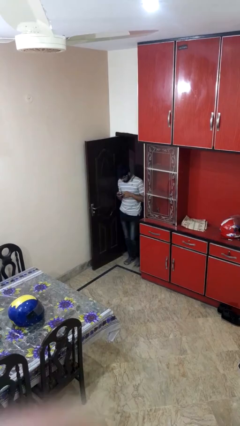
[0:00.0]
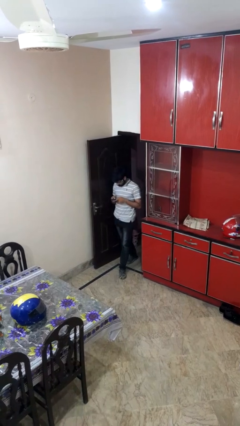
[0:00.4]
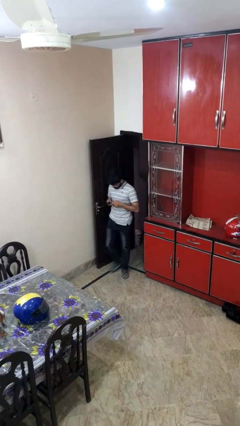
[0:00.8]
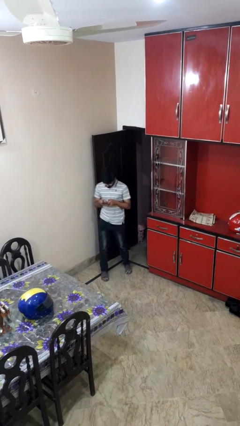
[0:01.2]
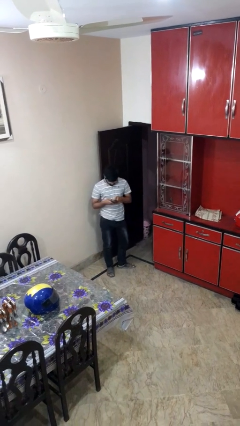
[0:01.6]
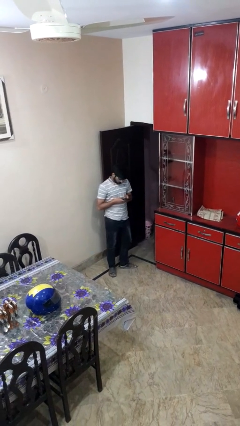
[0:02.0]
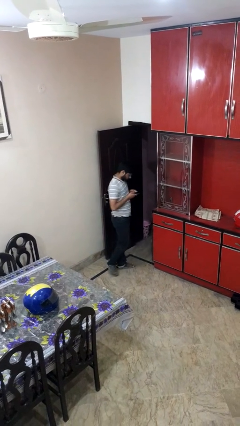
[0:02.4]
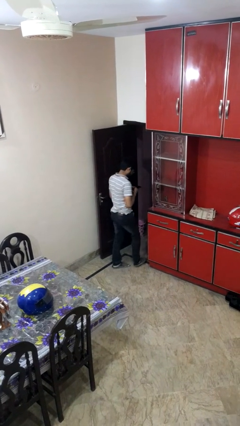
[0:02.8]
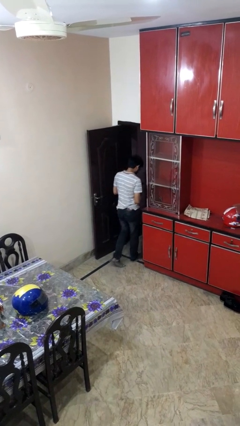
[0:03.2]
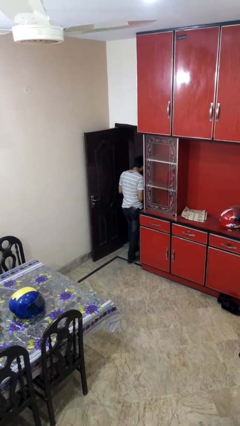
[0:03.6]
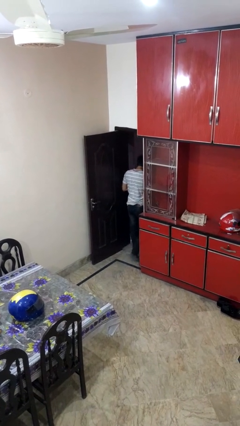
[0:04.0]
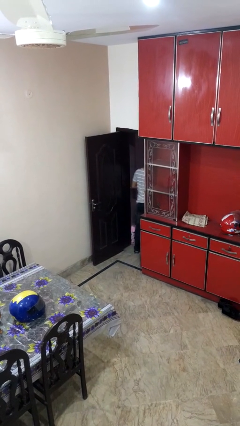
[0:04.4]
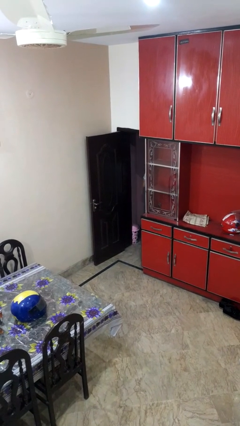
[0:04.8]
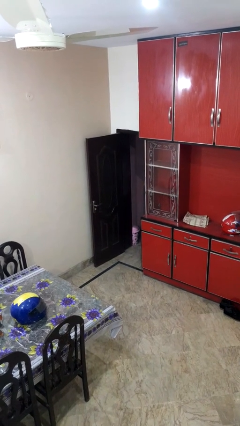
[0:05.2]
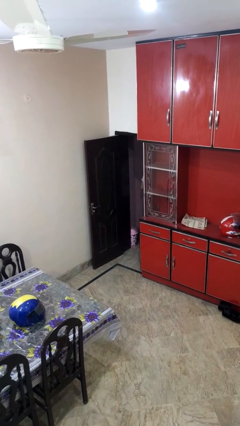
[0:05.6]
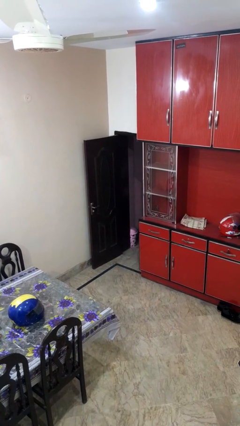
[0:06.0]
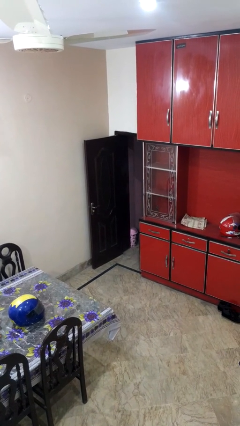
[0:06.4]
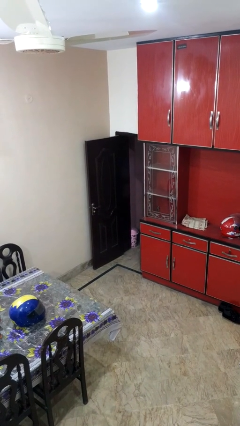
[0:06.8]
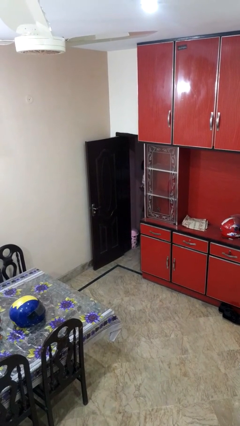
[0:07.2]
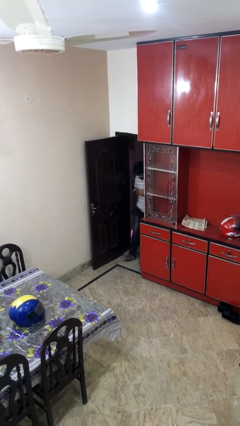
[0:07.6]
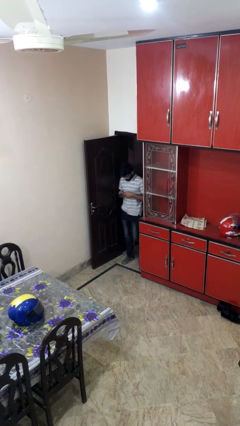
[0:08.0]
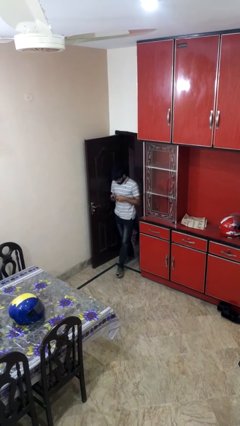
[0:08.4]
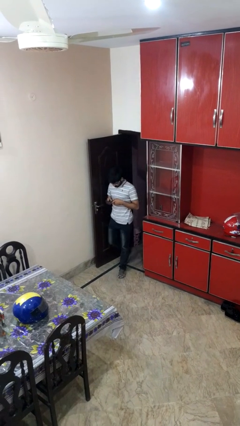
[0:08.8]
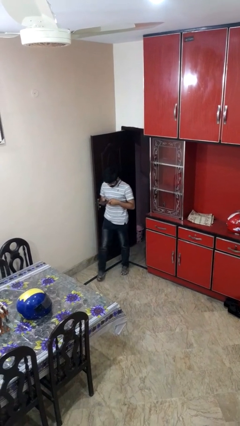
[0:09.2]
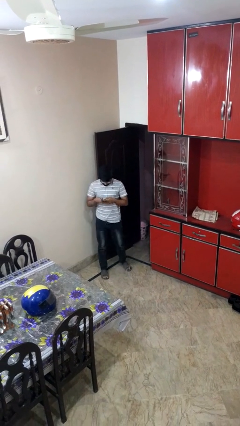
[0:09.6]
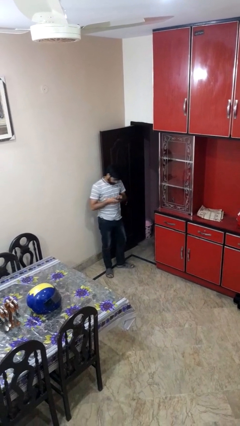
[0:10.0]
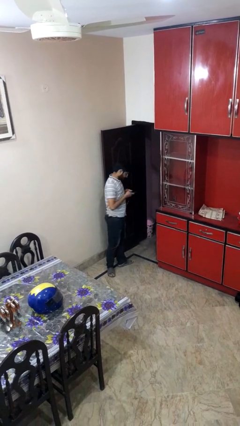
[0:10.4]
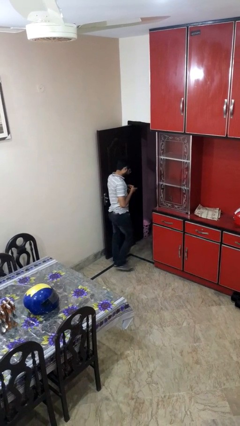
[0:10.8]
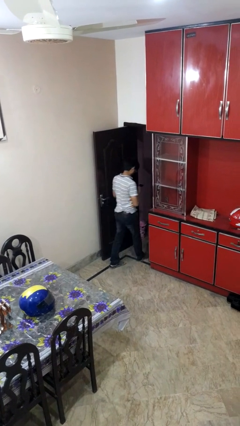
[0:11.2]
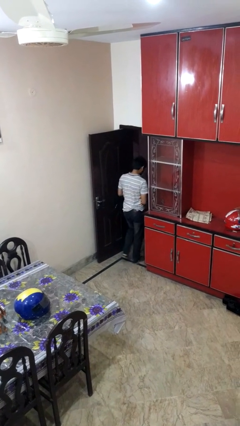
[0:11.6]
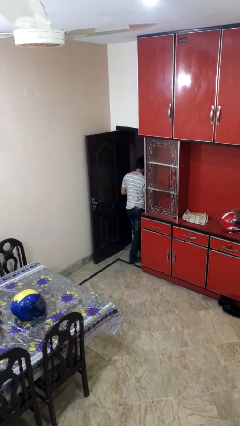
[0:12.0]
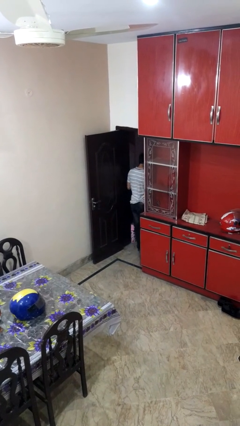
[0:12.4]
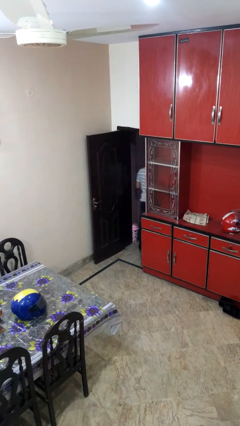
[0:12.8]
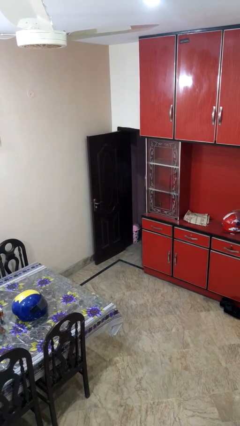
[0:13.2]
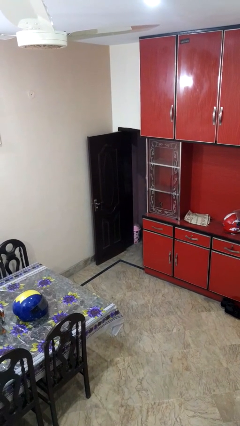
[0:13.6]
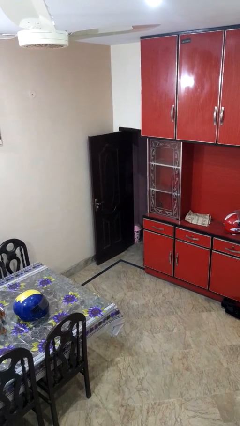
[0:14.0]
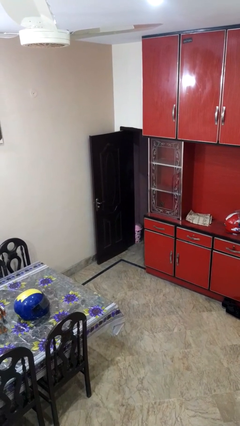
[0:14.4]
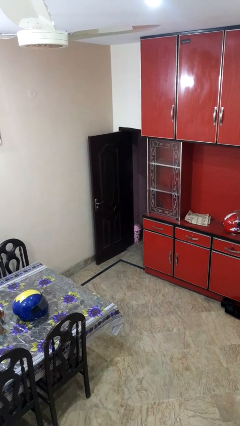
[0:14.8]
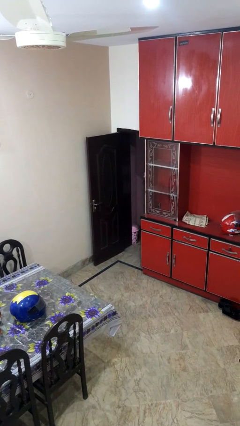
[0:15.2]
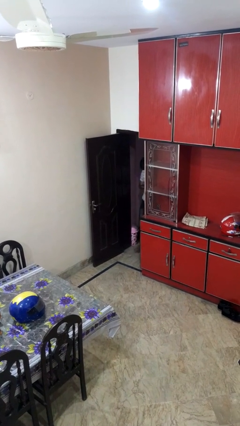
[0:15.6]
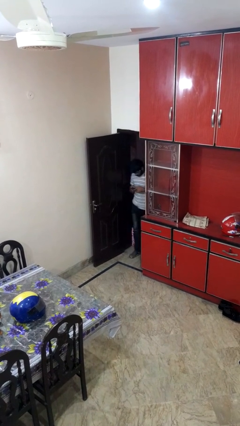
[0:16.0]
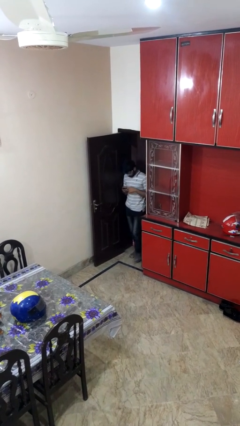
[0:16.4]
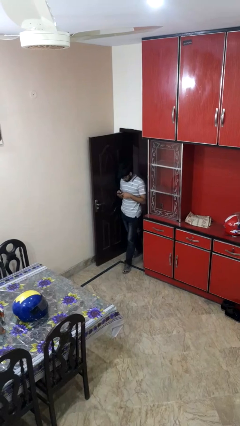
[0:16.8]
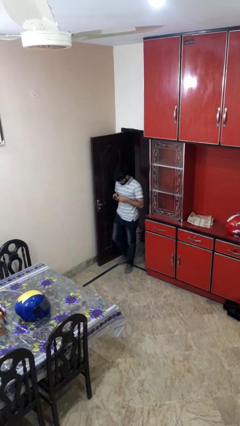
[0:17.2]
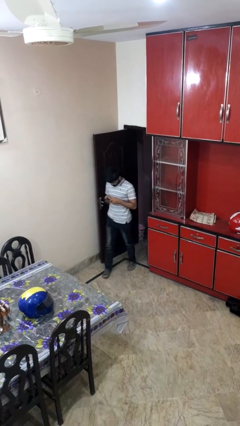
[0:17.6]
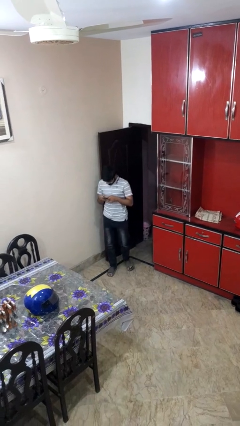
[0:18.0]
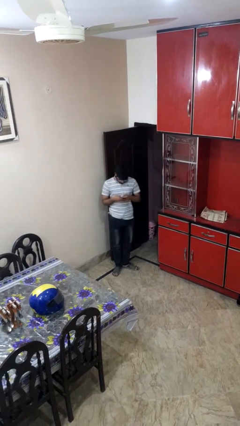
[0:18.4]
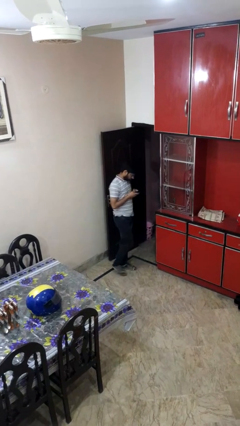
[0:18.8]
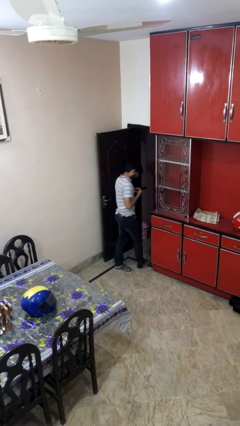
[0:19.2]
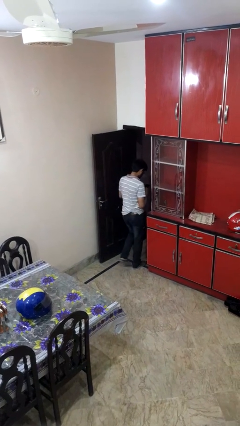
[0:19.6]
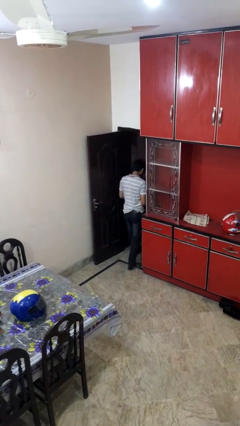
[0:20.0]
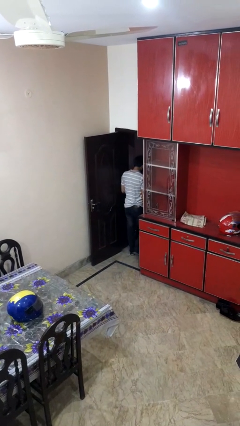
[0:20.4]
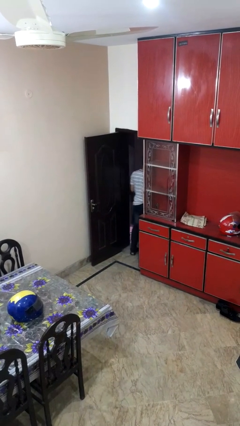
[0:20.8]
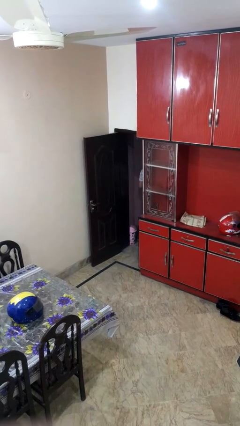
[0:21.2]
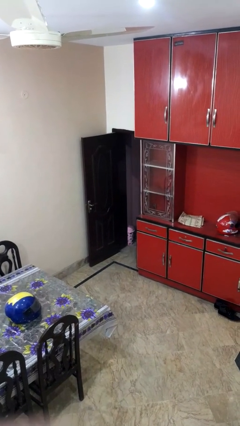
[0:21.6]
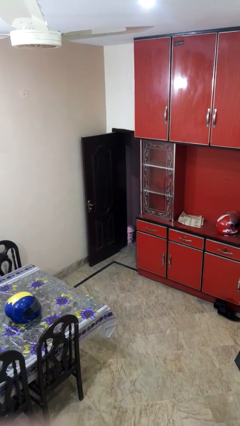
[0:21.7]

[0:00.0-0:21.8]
person texts on phone

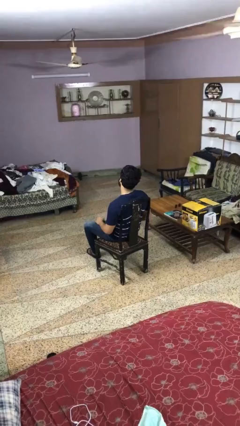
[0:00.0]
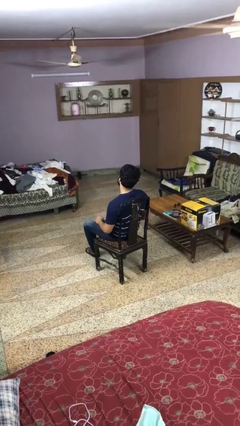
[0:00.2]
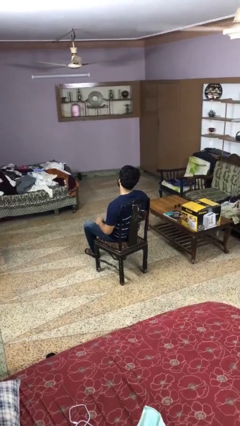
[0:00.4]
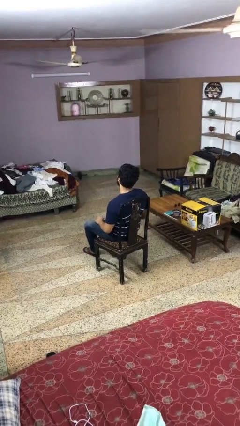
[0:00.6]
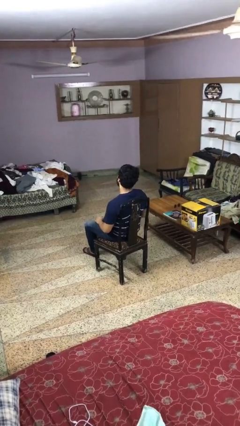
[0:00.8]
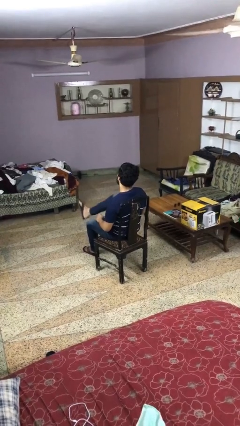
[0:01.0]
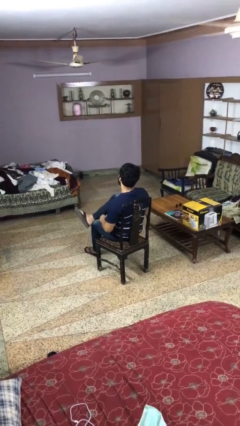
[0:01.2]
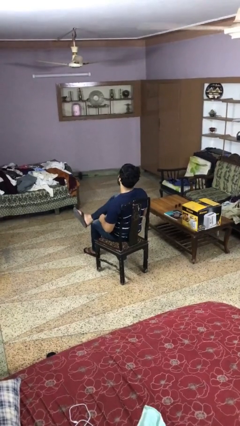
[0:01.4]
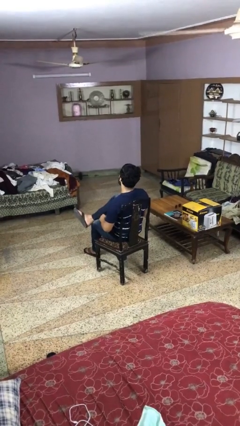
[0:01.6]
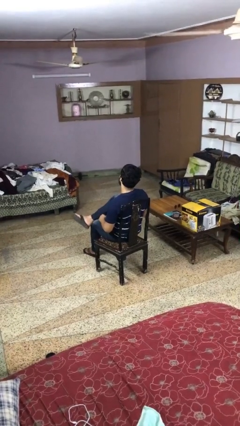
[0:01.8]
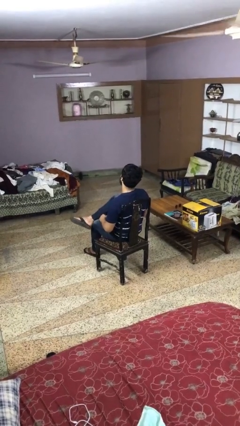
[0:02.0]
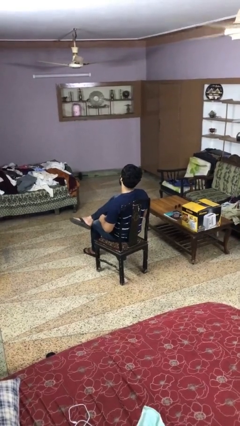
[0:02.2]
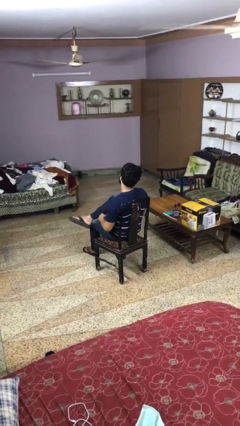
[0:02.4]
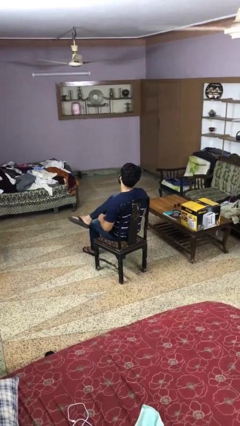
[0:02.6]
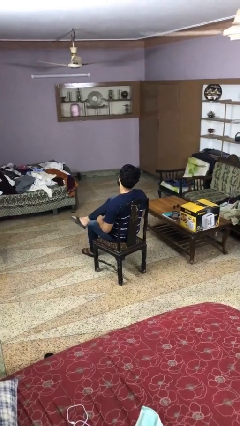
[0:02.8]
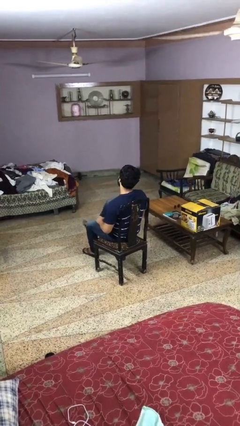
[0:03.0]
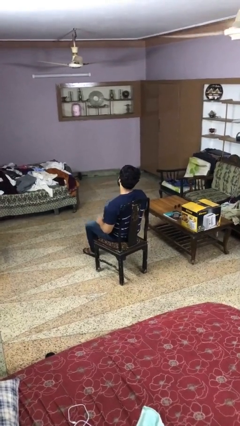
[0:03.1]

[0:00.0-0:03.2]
person crosses legs

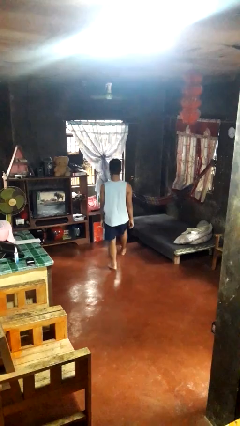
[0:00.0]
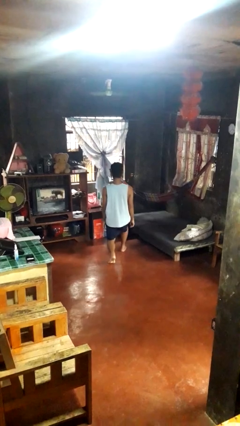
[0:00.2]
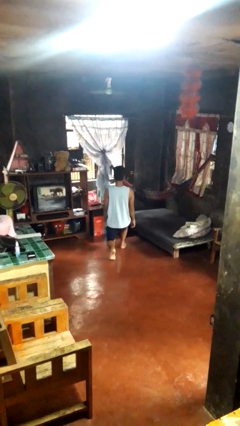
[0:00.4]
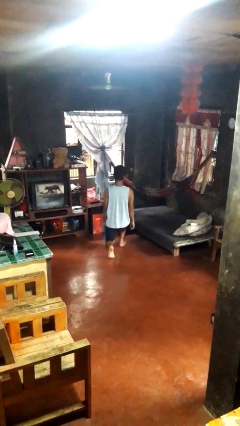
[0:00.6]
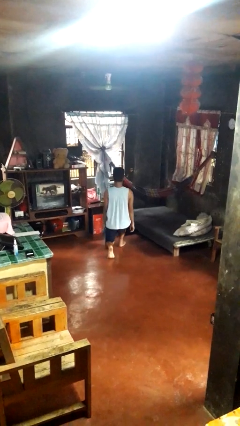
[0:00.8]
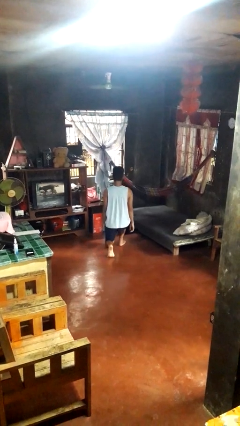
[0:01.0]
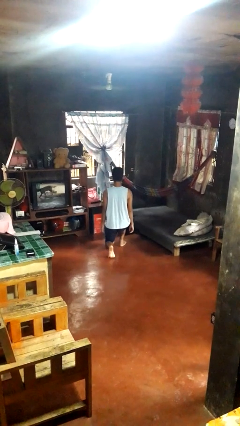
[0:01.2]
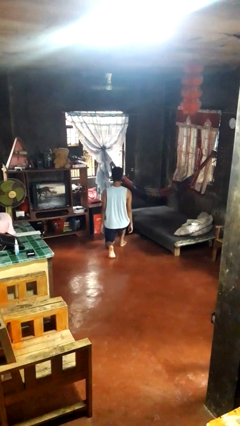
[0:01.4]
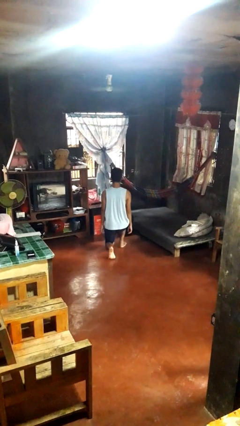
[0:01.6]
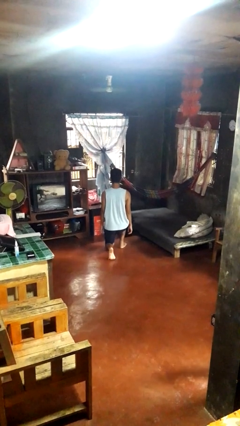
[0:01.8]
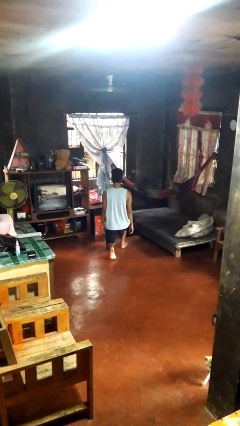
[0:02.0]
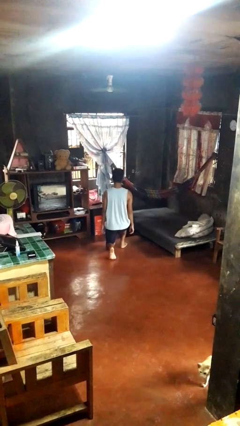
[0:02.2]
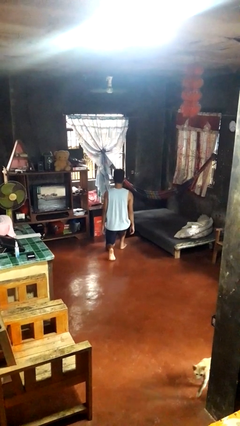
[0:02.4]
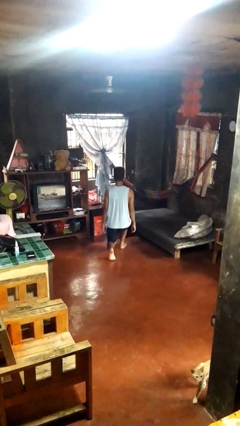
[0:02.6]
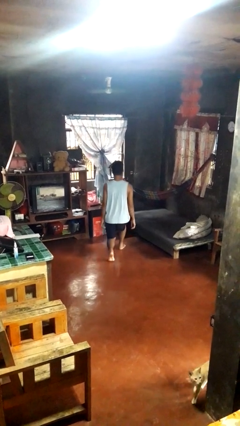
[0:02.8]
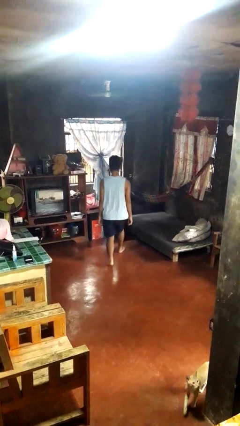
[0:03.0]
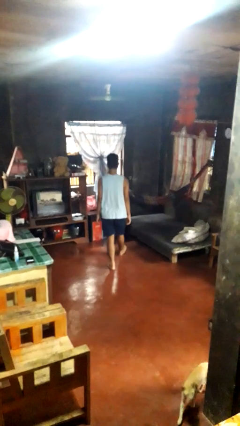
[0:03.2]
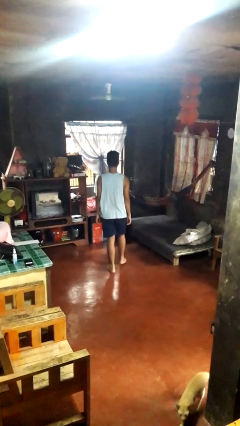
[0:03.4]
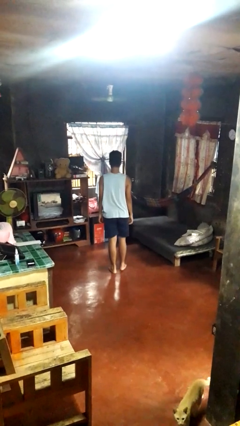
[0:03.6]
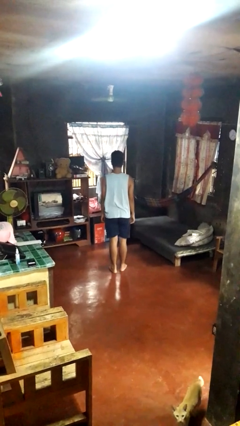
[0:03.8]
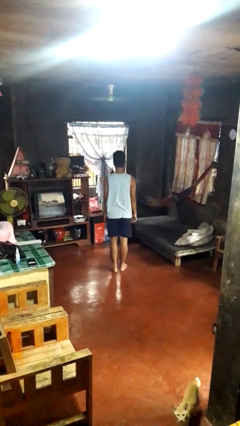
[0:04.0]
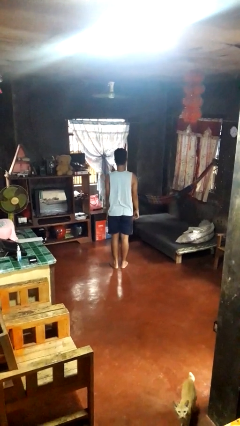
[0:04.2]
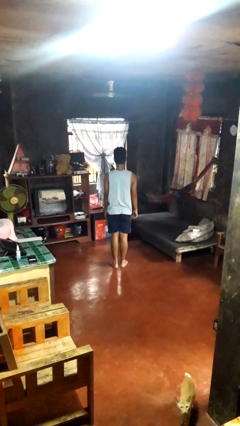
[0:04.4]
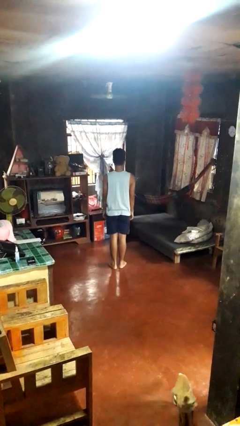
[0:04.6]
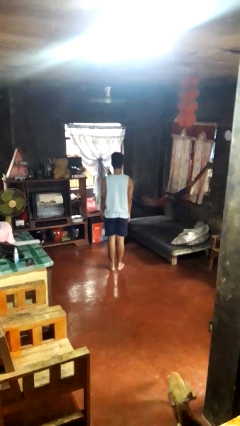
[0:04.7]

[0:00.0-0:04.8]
person exercises with lunges
